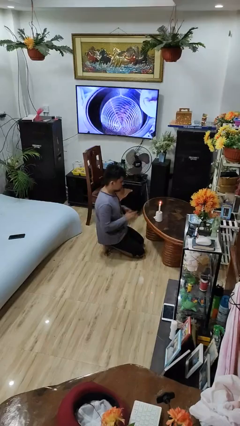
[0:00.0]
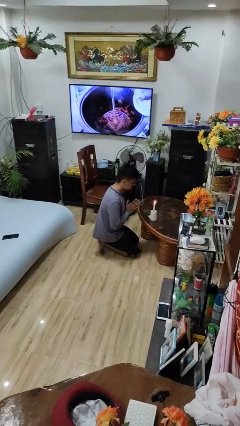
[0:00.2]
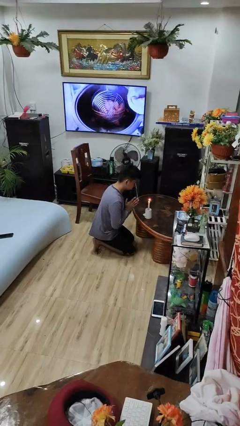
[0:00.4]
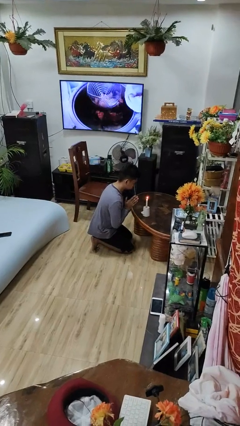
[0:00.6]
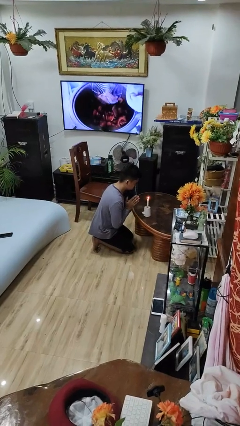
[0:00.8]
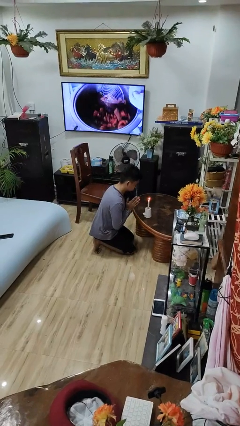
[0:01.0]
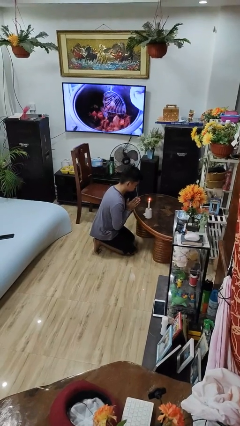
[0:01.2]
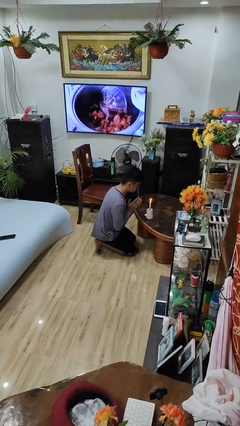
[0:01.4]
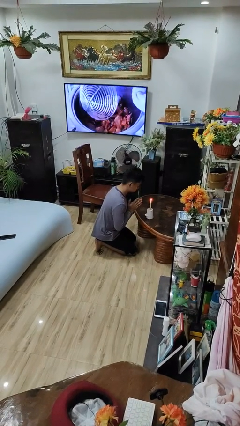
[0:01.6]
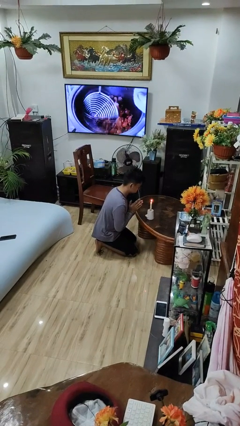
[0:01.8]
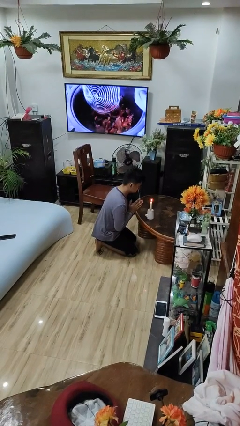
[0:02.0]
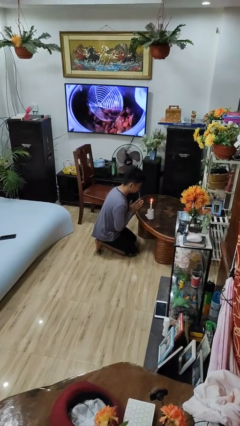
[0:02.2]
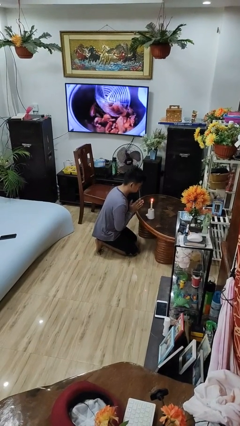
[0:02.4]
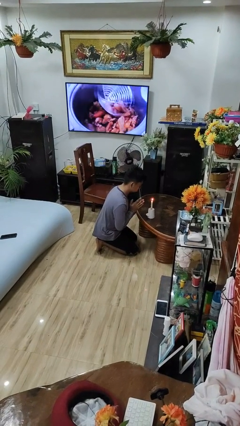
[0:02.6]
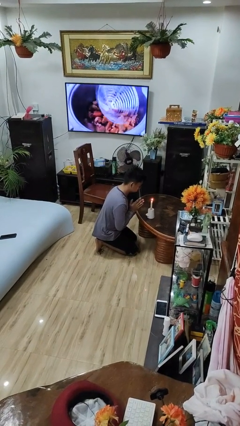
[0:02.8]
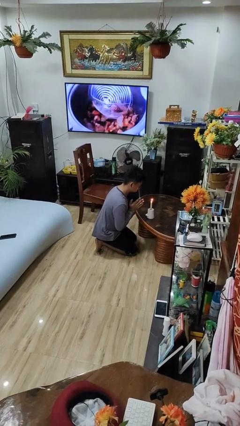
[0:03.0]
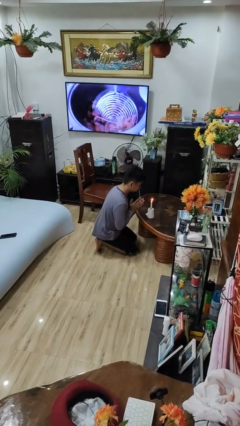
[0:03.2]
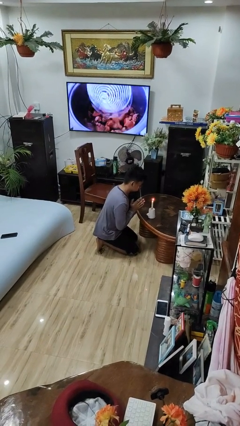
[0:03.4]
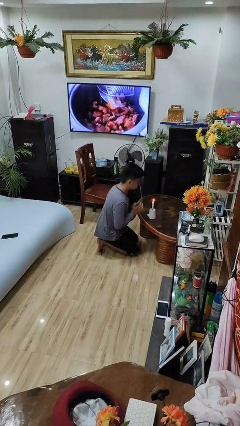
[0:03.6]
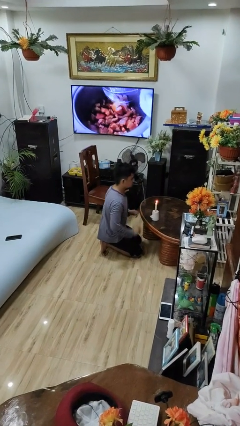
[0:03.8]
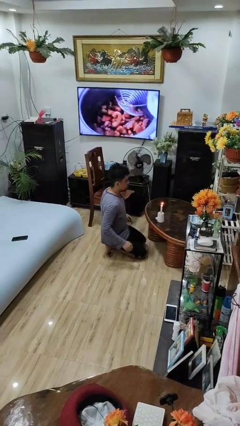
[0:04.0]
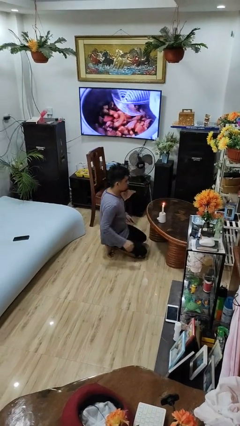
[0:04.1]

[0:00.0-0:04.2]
person prays

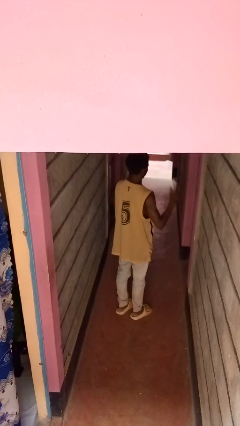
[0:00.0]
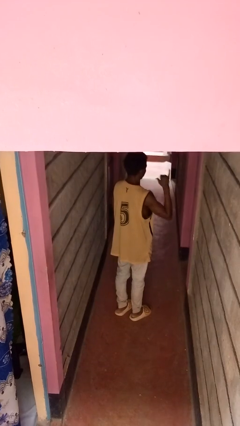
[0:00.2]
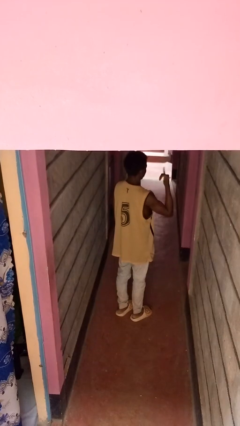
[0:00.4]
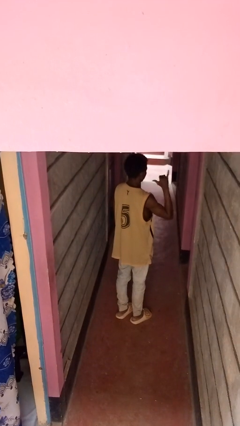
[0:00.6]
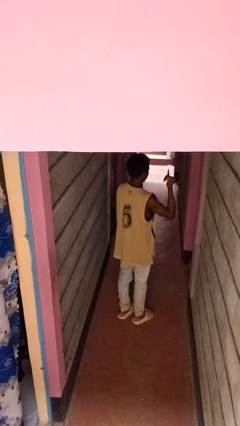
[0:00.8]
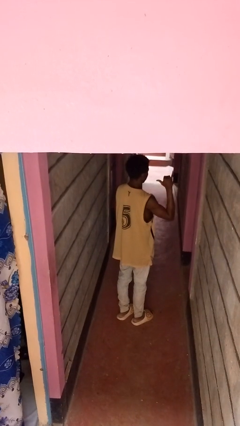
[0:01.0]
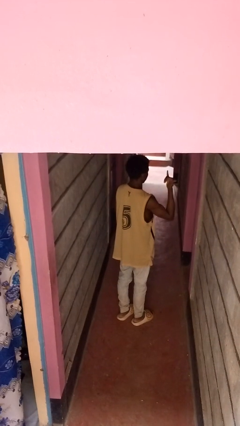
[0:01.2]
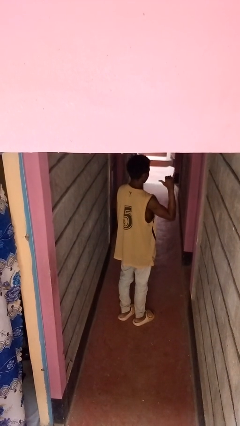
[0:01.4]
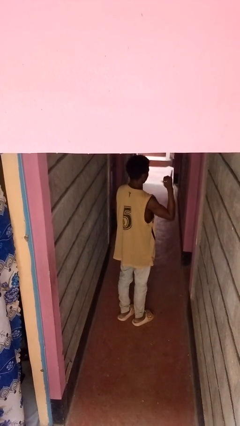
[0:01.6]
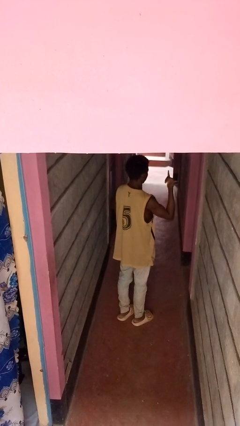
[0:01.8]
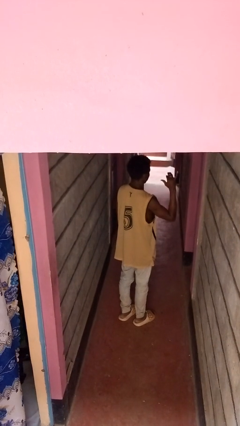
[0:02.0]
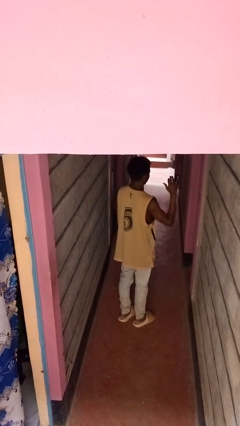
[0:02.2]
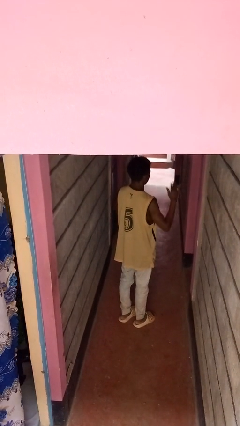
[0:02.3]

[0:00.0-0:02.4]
person gestures hang loose

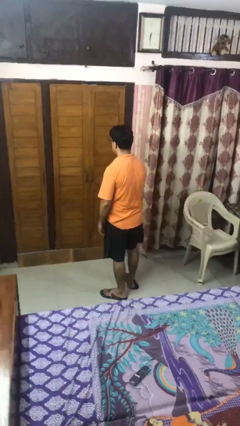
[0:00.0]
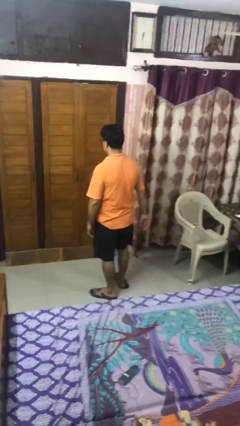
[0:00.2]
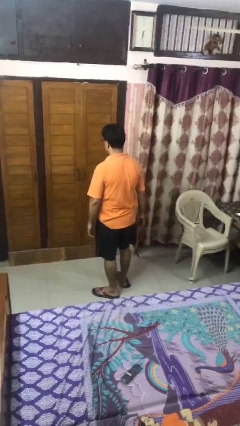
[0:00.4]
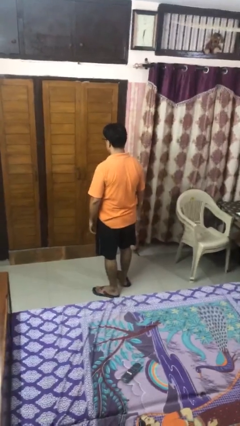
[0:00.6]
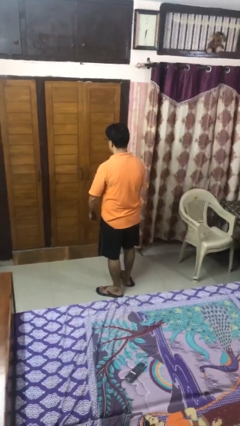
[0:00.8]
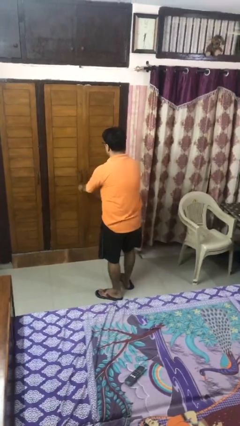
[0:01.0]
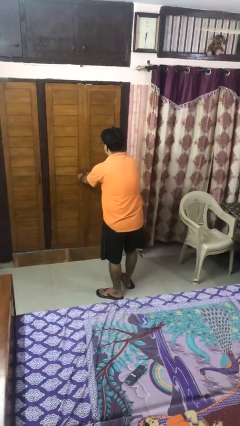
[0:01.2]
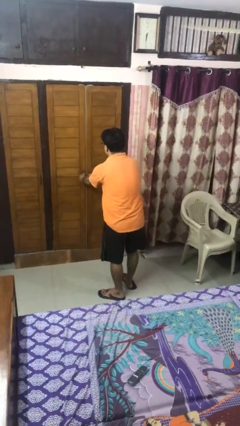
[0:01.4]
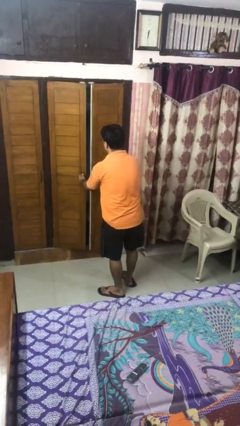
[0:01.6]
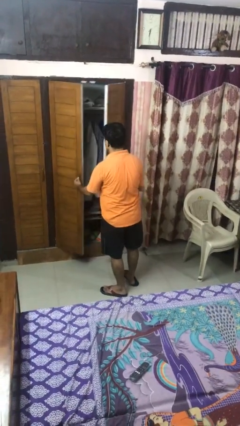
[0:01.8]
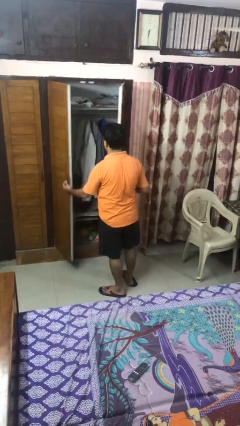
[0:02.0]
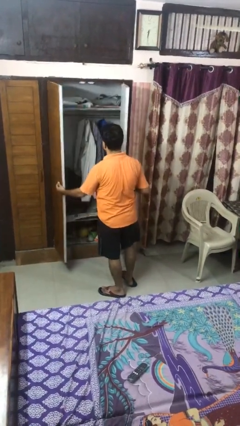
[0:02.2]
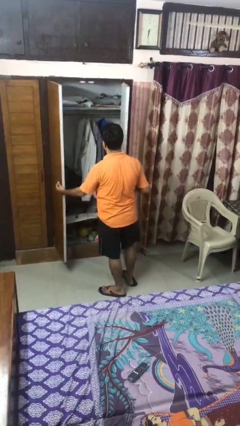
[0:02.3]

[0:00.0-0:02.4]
person opens closet door

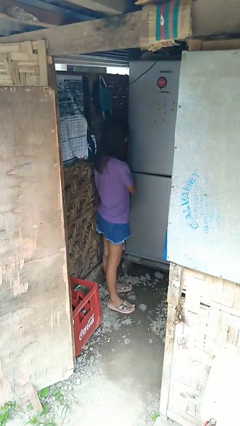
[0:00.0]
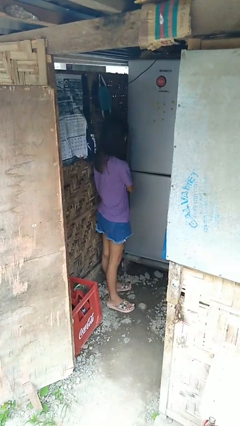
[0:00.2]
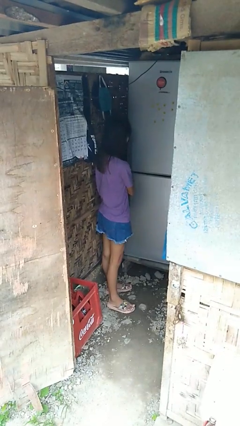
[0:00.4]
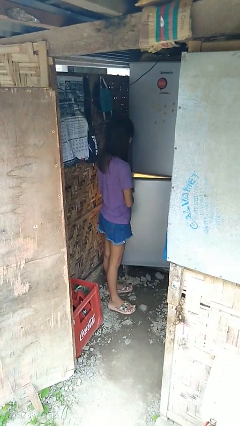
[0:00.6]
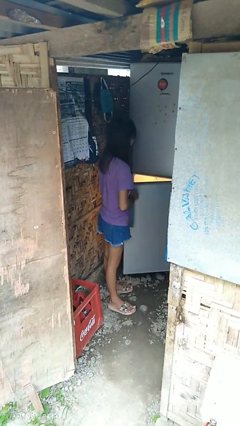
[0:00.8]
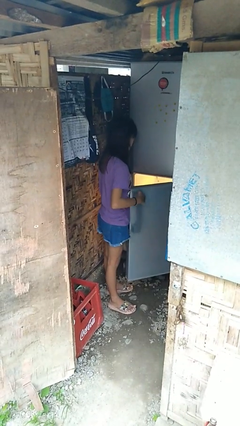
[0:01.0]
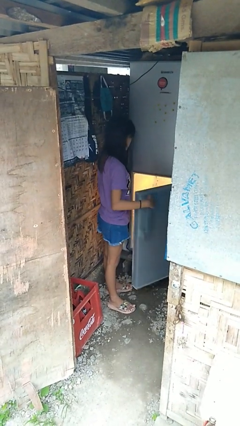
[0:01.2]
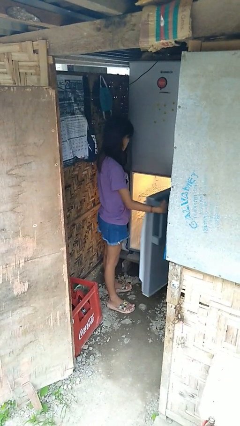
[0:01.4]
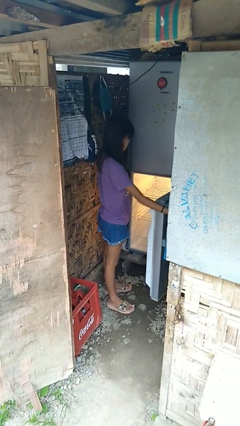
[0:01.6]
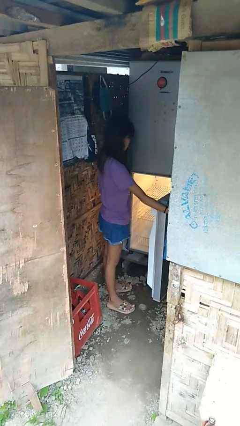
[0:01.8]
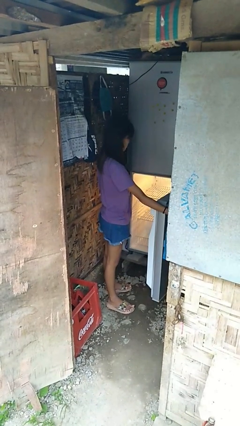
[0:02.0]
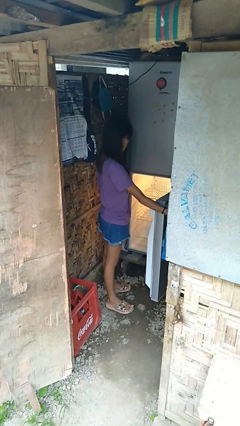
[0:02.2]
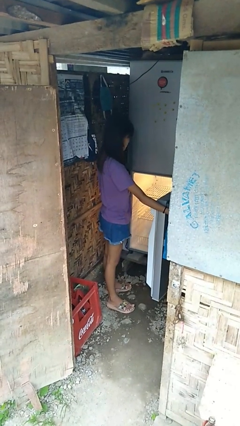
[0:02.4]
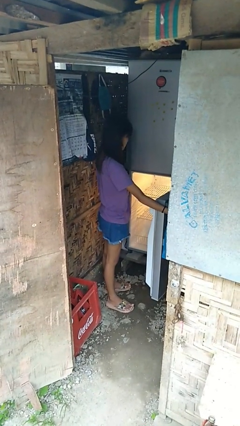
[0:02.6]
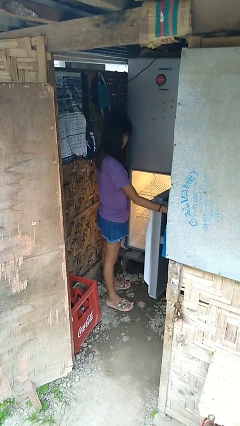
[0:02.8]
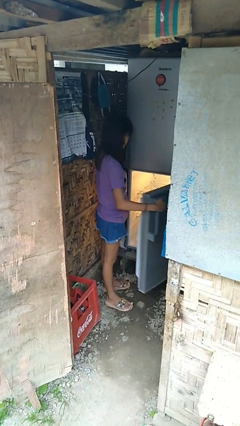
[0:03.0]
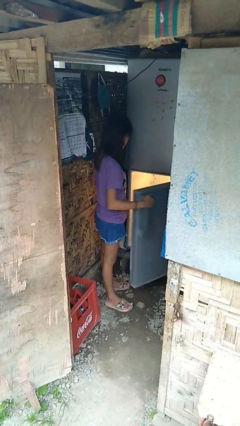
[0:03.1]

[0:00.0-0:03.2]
person opens refrigerator

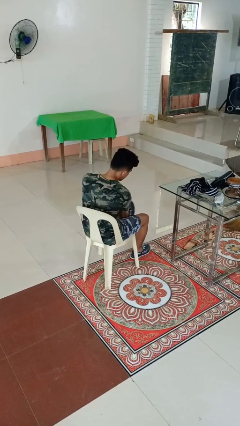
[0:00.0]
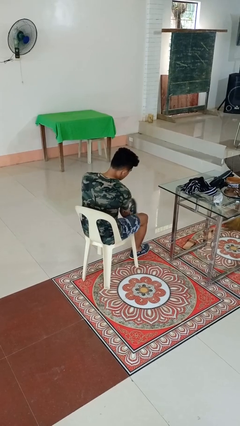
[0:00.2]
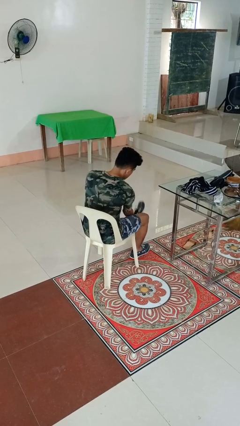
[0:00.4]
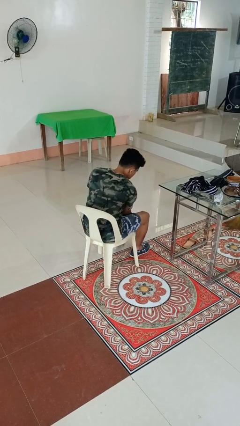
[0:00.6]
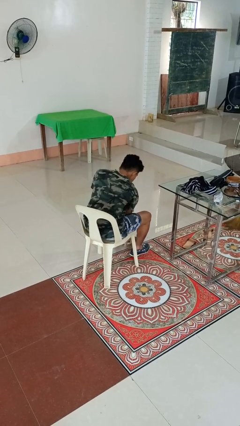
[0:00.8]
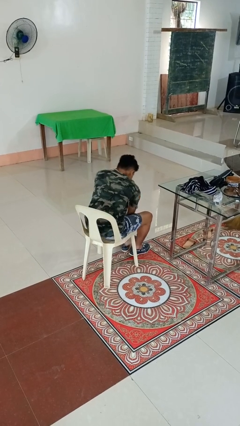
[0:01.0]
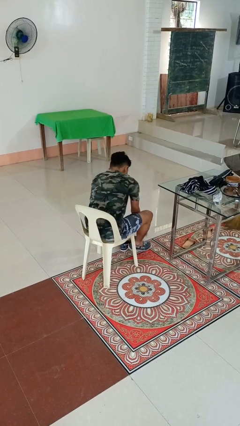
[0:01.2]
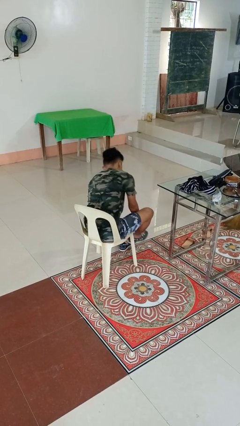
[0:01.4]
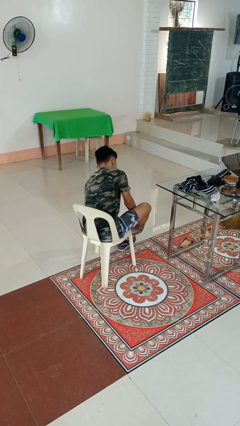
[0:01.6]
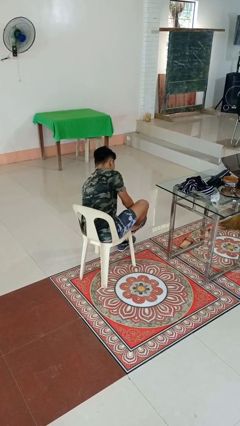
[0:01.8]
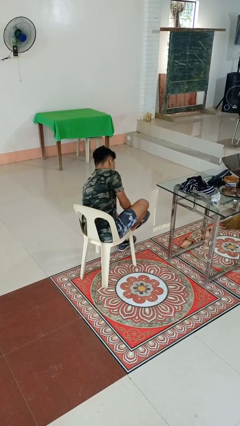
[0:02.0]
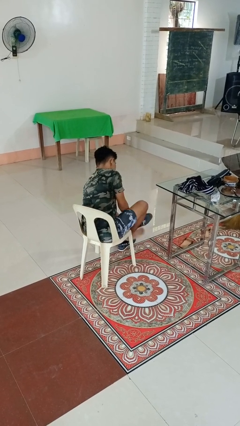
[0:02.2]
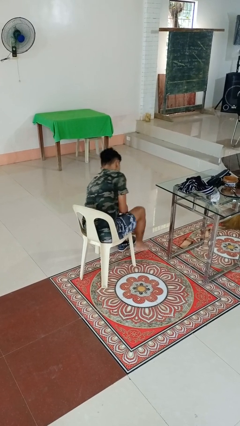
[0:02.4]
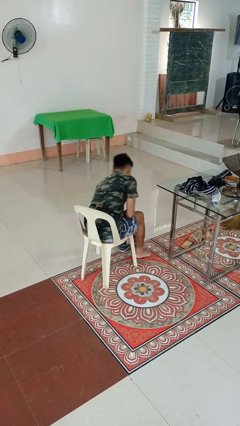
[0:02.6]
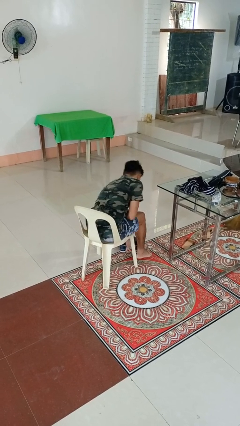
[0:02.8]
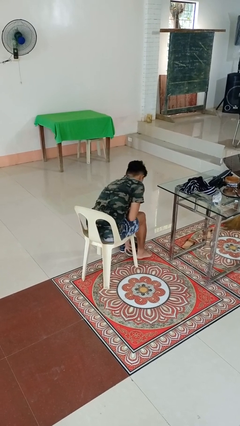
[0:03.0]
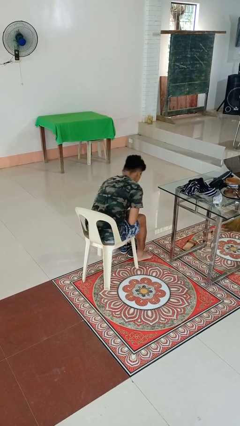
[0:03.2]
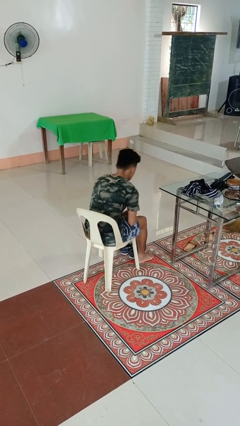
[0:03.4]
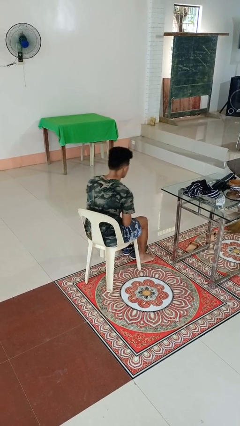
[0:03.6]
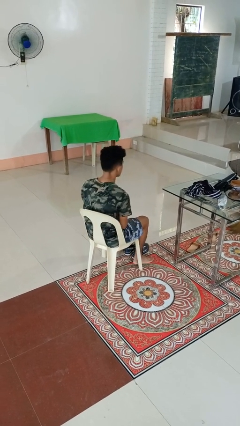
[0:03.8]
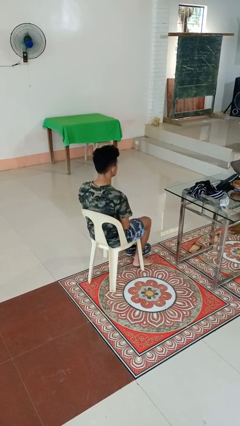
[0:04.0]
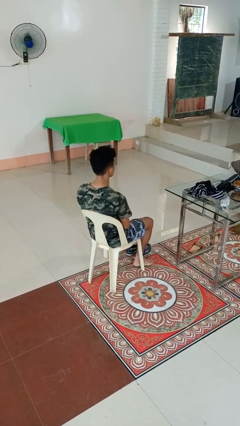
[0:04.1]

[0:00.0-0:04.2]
person takes off shoes

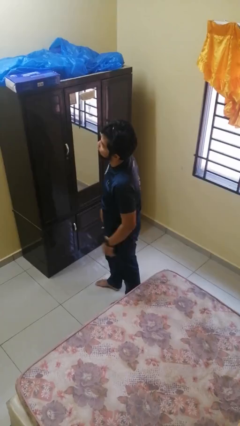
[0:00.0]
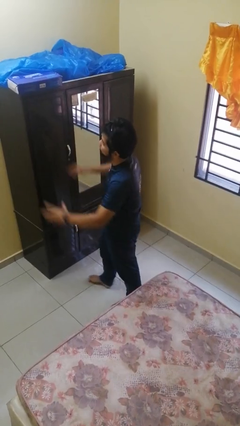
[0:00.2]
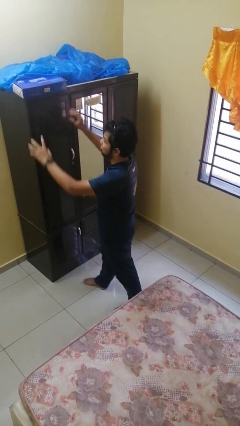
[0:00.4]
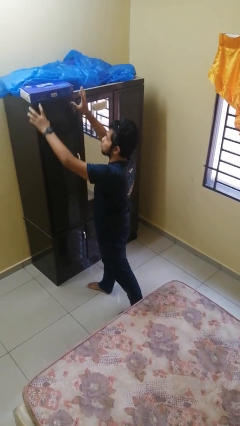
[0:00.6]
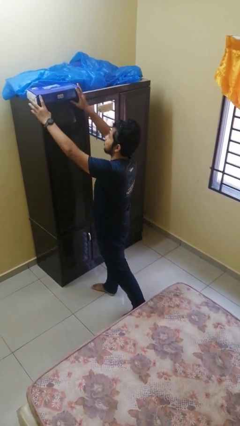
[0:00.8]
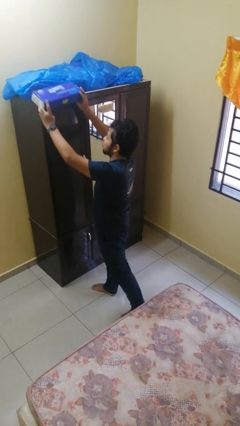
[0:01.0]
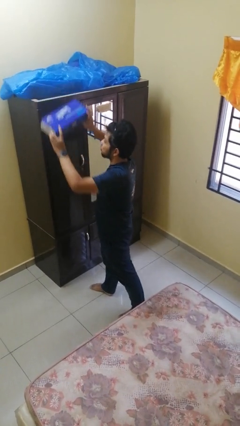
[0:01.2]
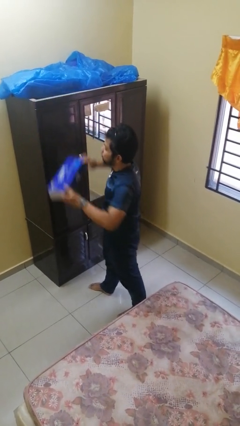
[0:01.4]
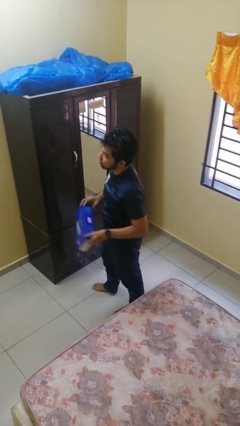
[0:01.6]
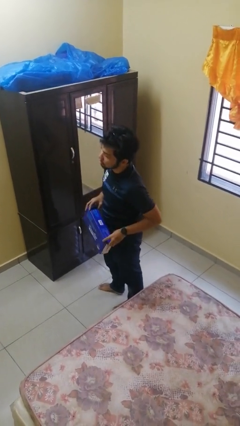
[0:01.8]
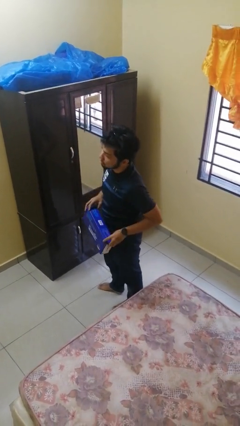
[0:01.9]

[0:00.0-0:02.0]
person picks up object from countertop
